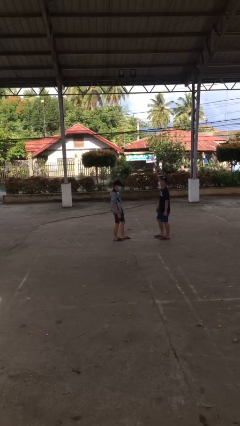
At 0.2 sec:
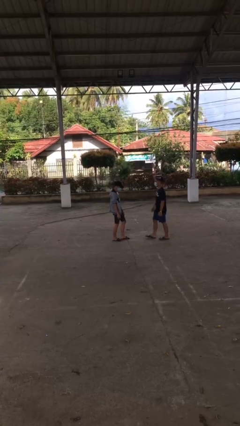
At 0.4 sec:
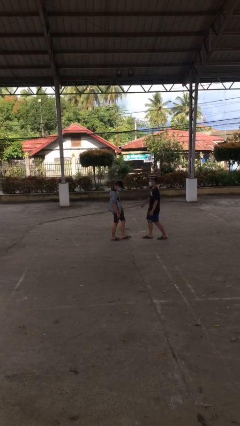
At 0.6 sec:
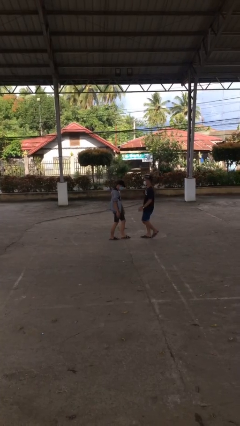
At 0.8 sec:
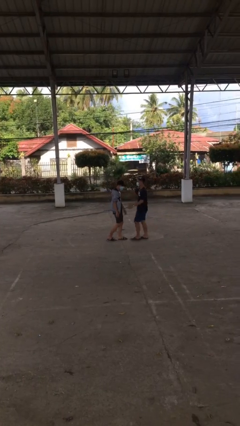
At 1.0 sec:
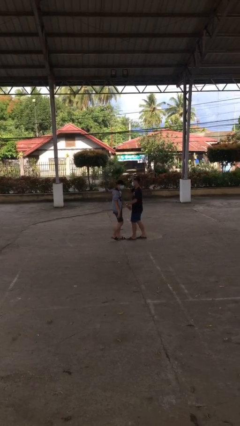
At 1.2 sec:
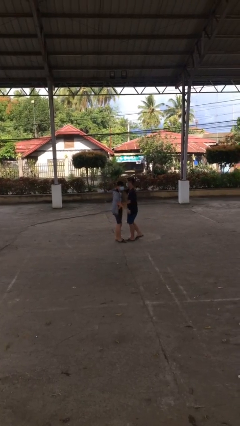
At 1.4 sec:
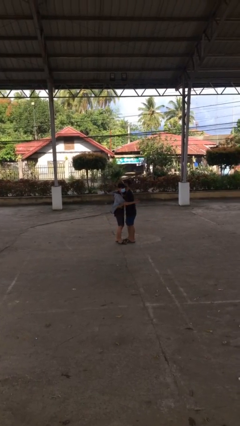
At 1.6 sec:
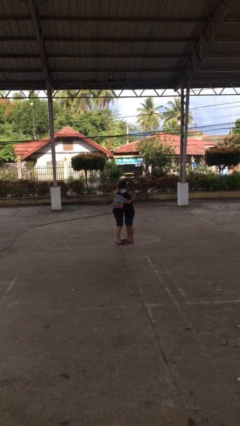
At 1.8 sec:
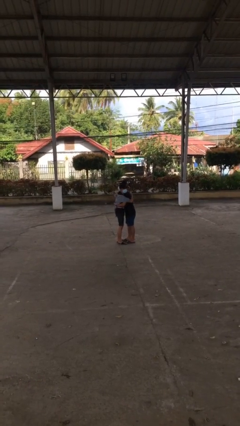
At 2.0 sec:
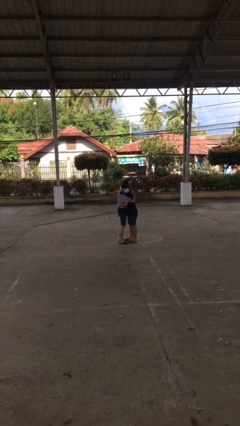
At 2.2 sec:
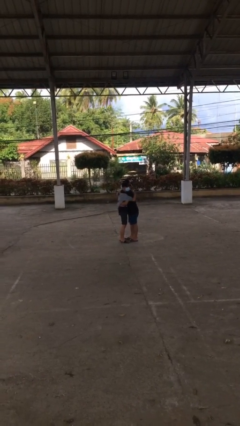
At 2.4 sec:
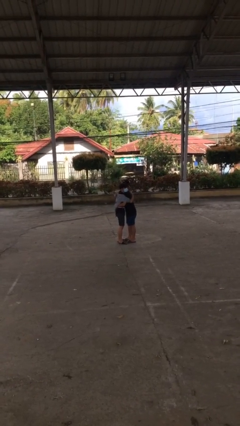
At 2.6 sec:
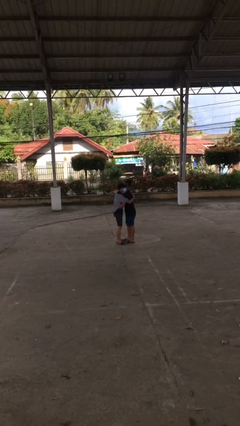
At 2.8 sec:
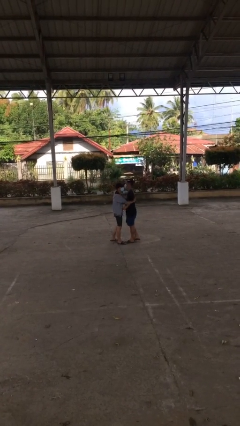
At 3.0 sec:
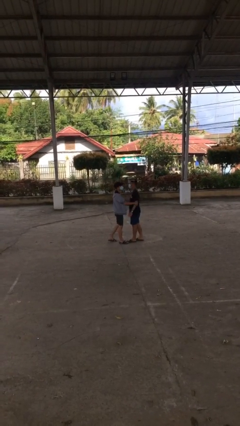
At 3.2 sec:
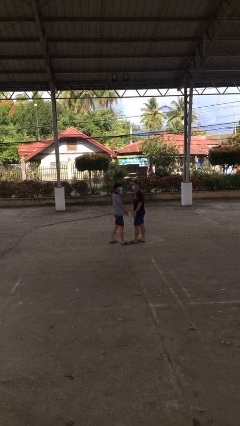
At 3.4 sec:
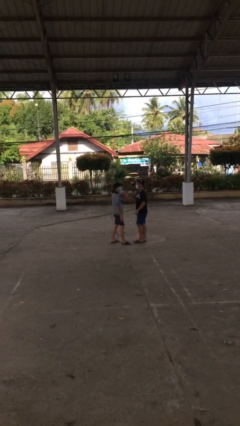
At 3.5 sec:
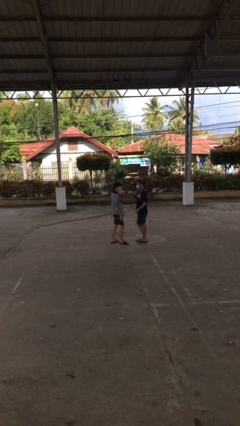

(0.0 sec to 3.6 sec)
person embraces person

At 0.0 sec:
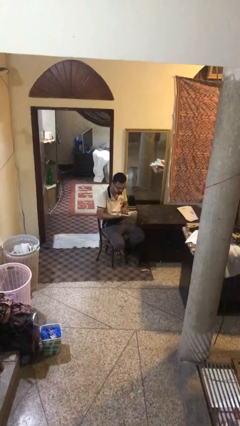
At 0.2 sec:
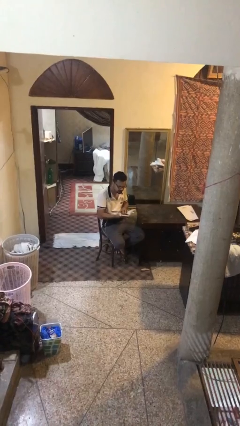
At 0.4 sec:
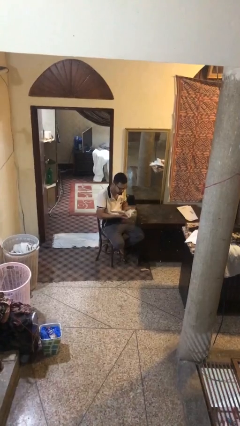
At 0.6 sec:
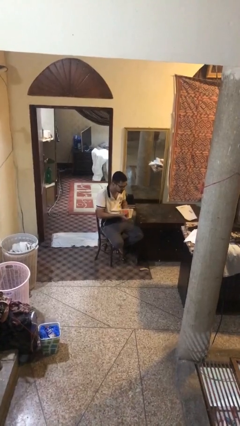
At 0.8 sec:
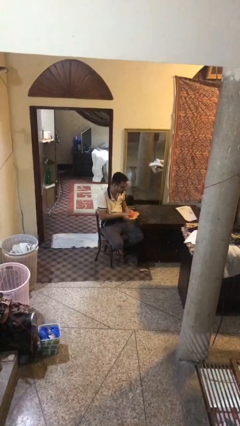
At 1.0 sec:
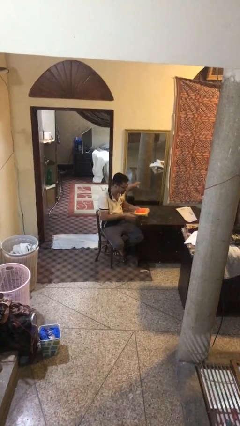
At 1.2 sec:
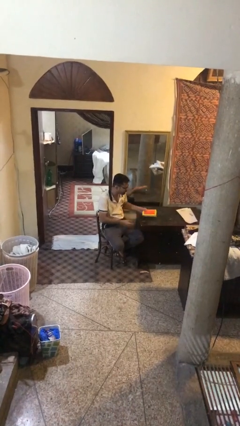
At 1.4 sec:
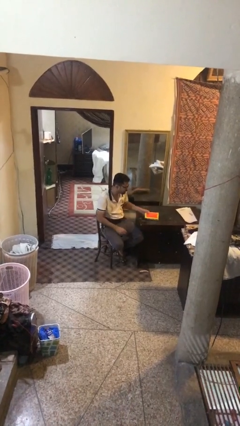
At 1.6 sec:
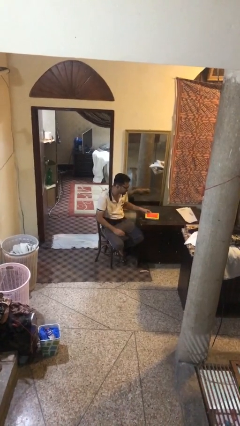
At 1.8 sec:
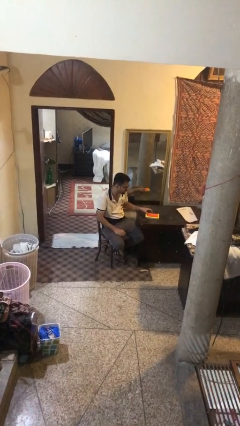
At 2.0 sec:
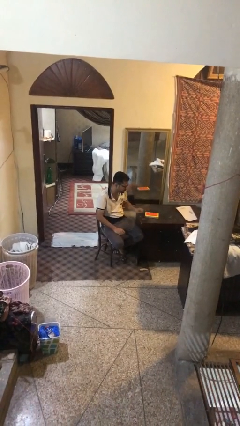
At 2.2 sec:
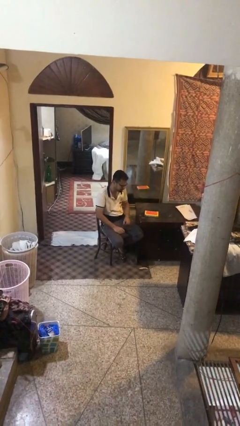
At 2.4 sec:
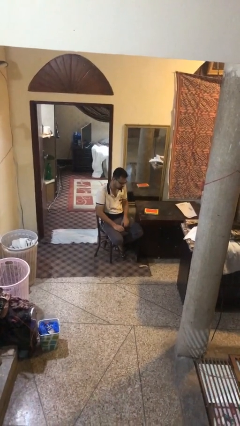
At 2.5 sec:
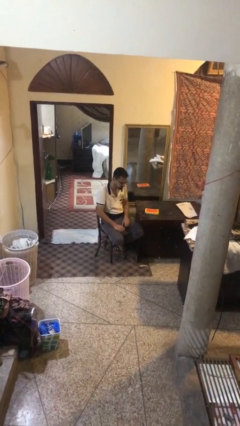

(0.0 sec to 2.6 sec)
person puts down object on table

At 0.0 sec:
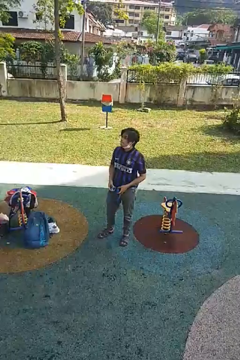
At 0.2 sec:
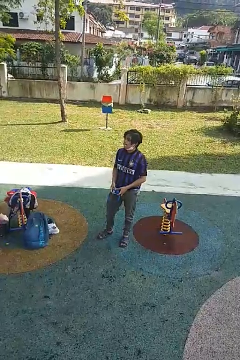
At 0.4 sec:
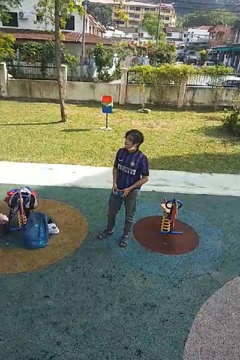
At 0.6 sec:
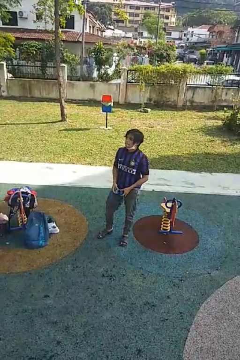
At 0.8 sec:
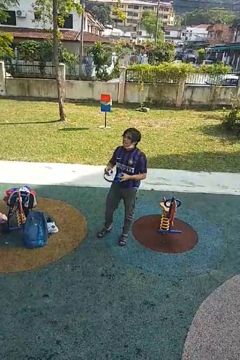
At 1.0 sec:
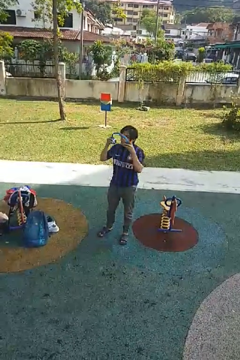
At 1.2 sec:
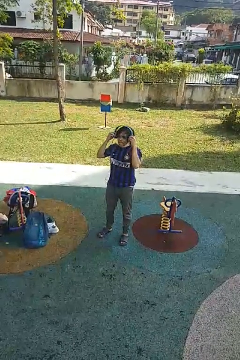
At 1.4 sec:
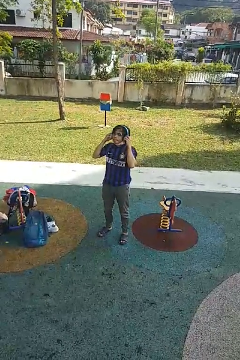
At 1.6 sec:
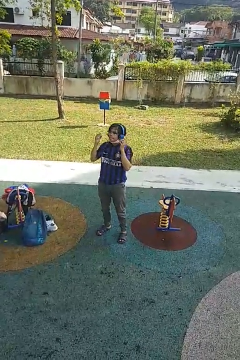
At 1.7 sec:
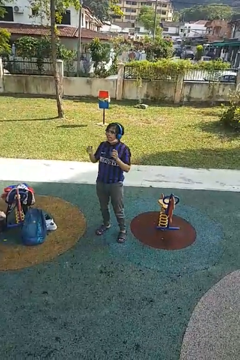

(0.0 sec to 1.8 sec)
person puts on headphones

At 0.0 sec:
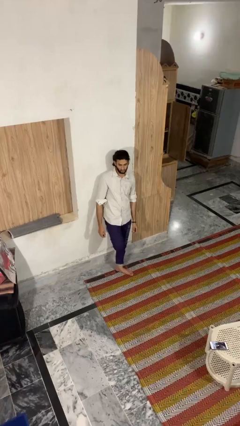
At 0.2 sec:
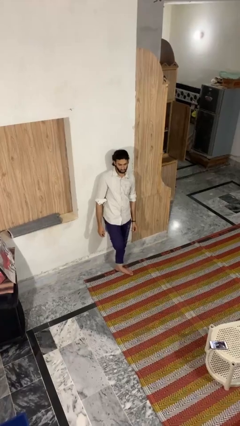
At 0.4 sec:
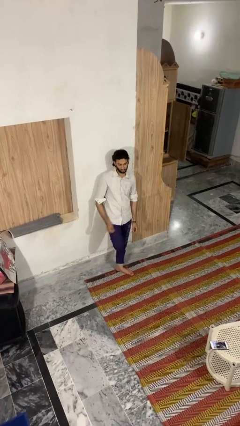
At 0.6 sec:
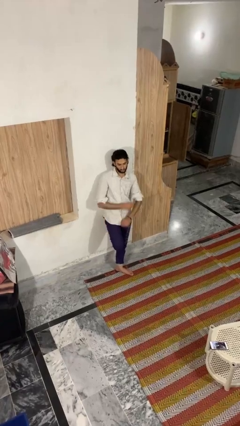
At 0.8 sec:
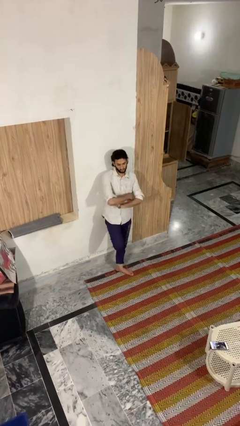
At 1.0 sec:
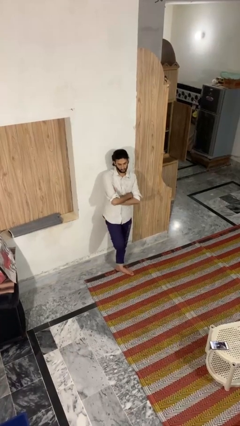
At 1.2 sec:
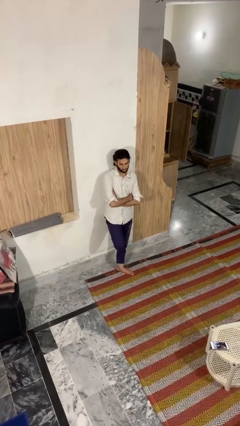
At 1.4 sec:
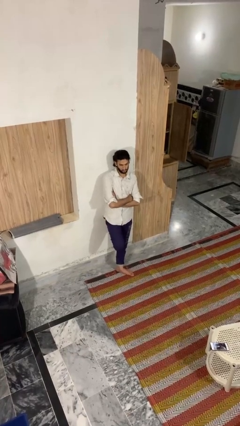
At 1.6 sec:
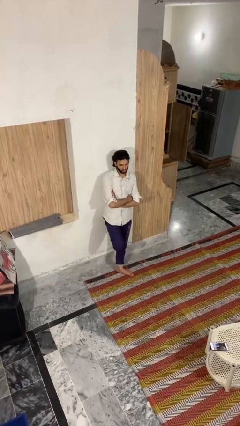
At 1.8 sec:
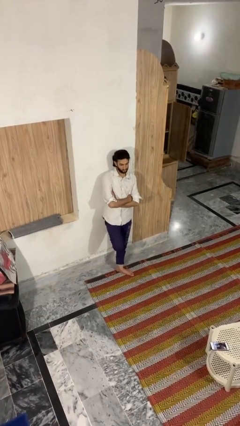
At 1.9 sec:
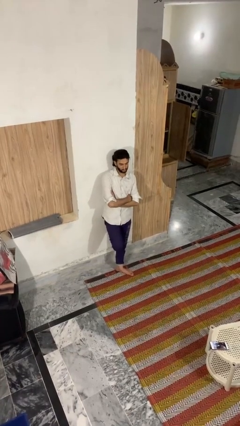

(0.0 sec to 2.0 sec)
person crosses arms

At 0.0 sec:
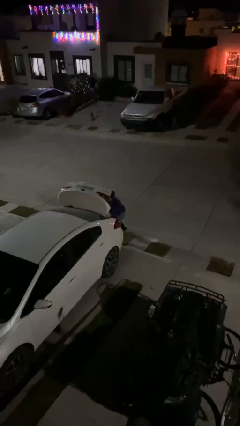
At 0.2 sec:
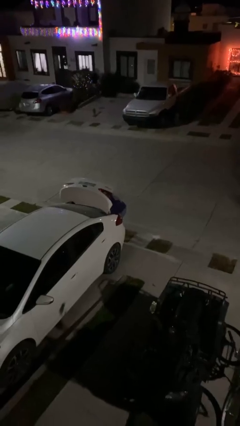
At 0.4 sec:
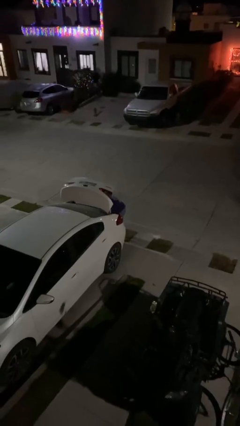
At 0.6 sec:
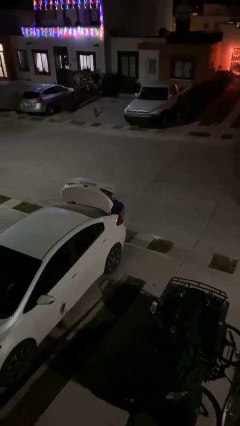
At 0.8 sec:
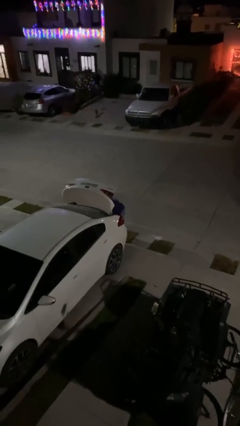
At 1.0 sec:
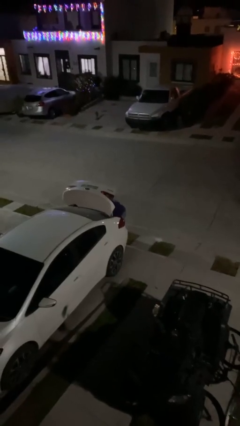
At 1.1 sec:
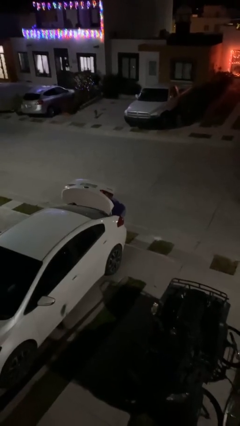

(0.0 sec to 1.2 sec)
person loads car

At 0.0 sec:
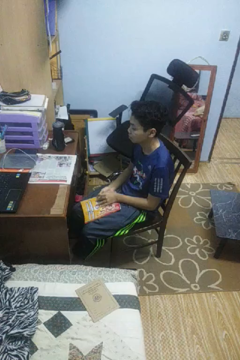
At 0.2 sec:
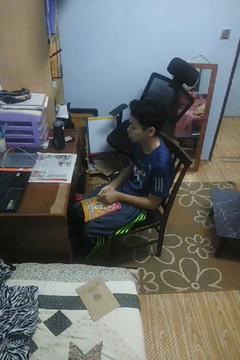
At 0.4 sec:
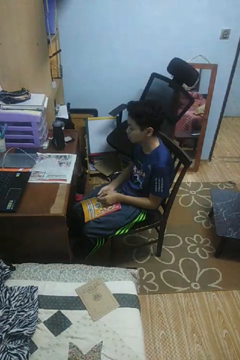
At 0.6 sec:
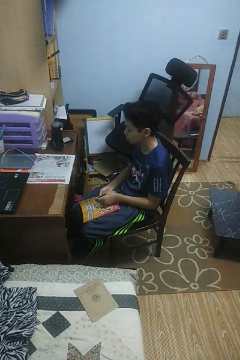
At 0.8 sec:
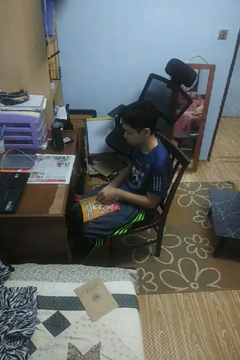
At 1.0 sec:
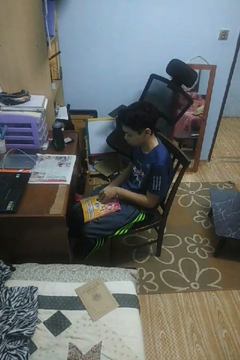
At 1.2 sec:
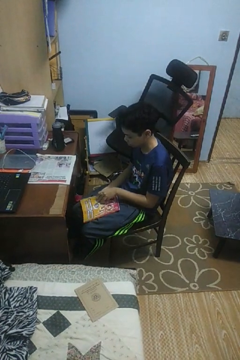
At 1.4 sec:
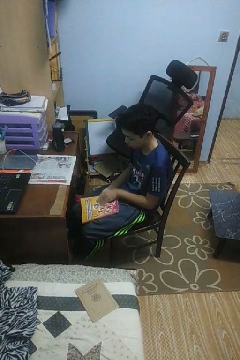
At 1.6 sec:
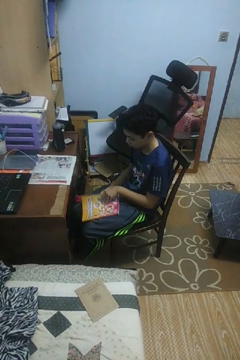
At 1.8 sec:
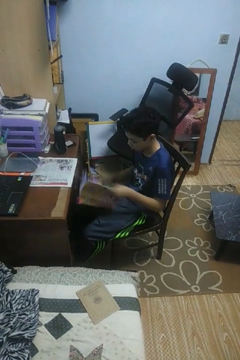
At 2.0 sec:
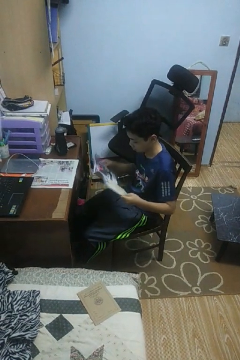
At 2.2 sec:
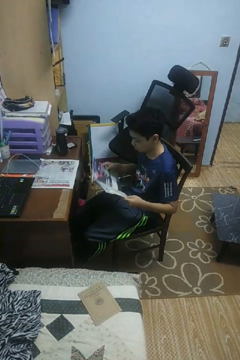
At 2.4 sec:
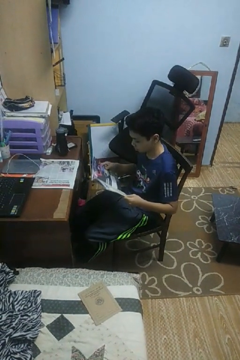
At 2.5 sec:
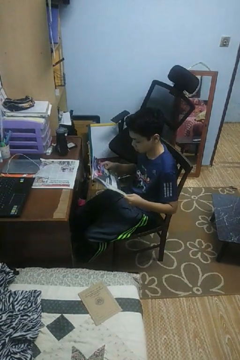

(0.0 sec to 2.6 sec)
person reads magazine

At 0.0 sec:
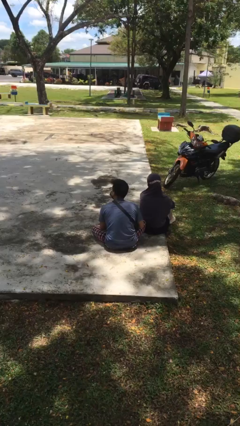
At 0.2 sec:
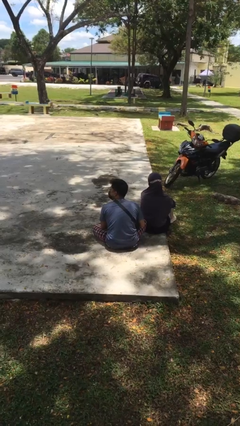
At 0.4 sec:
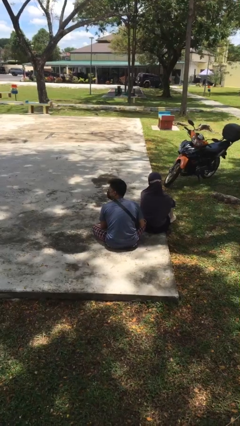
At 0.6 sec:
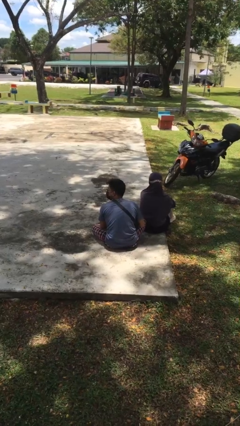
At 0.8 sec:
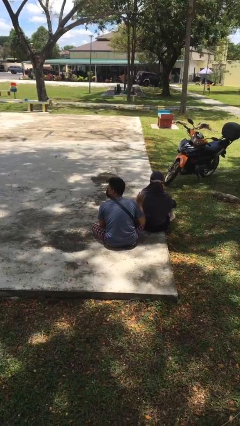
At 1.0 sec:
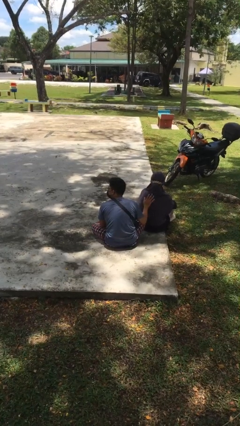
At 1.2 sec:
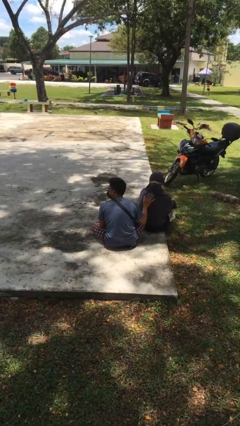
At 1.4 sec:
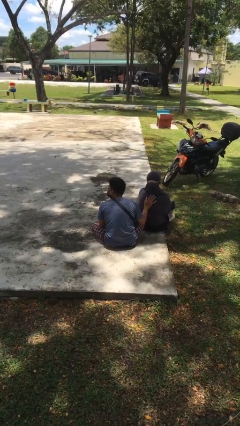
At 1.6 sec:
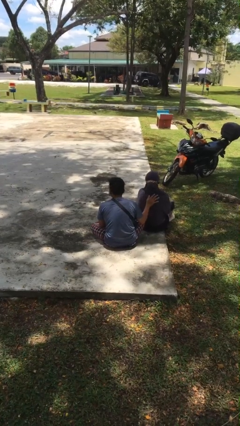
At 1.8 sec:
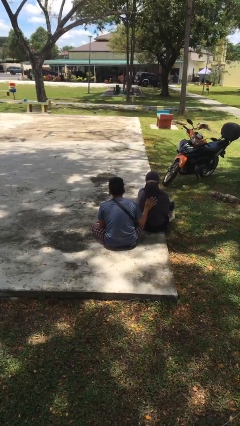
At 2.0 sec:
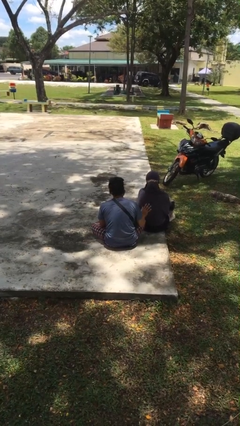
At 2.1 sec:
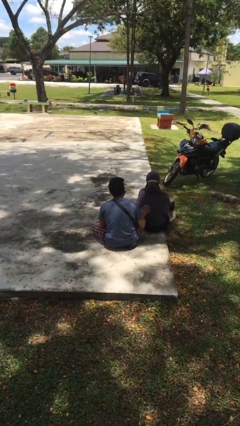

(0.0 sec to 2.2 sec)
person touches back of person

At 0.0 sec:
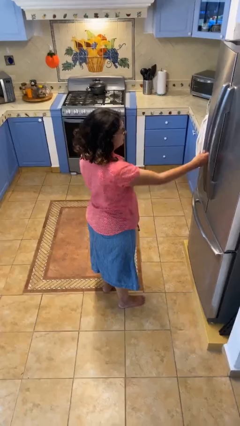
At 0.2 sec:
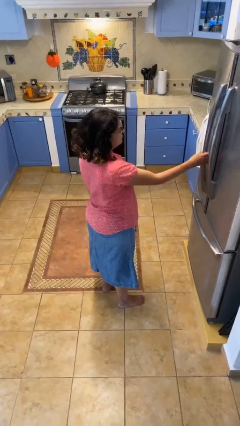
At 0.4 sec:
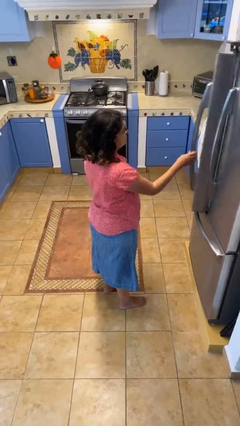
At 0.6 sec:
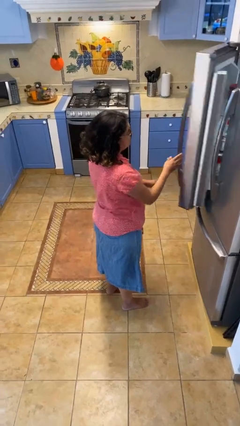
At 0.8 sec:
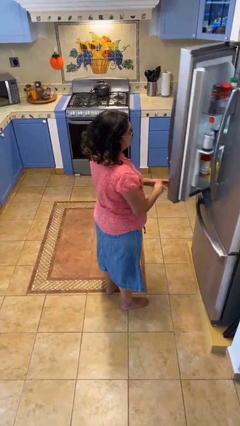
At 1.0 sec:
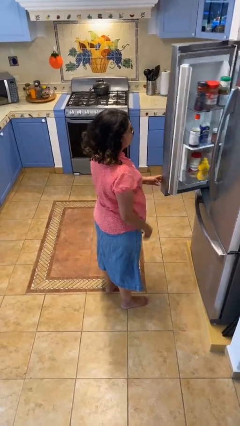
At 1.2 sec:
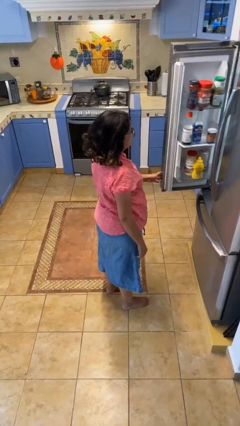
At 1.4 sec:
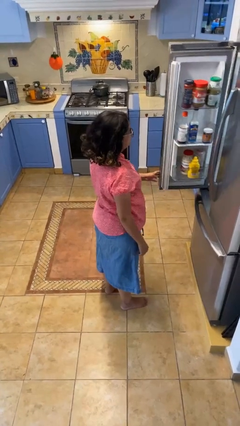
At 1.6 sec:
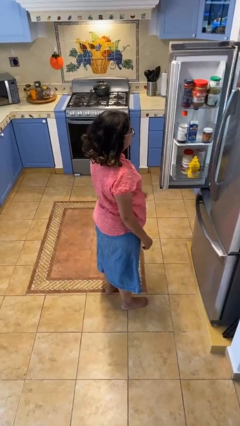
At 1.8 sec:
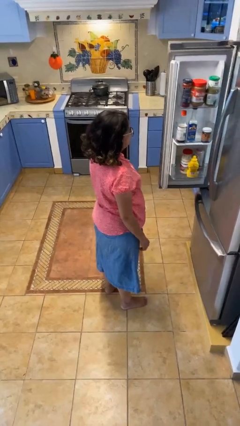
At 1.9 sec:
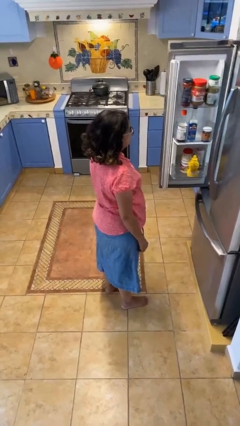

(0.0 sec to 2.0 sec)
person opens refrigerator
